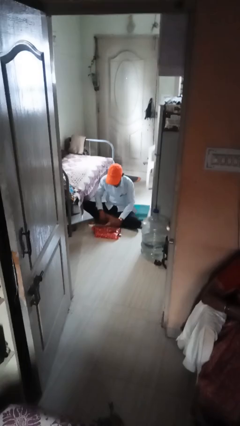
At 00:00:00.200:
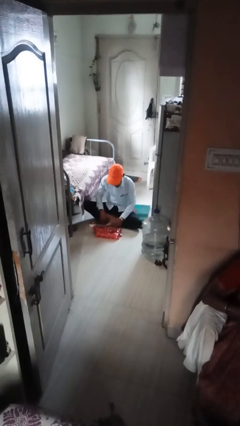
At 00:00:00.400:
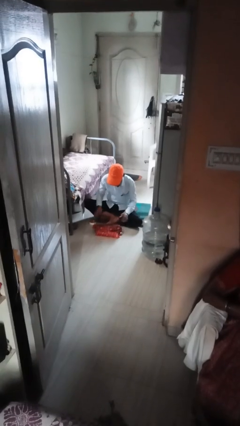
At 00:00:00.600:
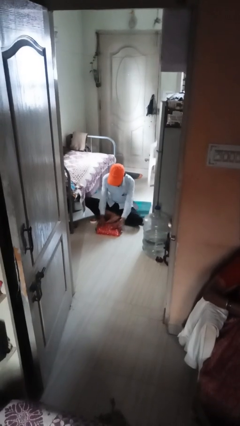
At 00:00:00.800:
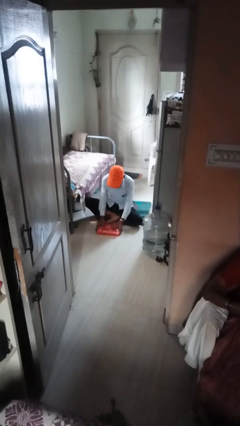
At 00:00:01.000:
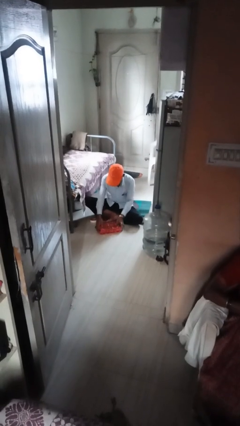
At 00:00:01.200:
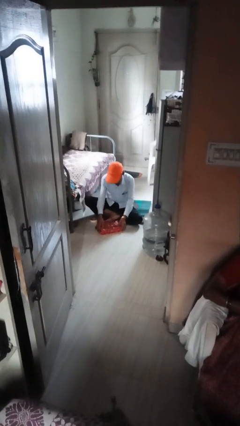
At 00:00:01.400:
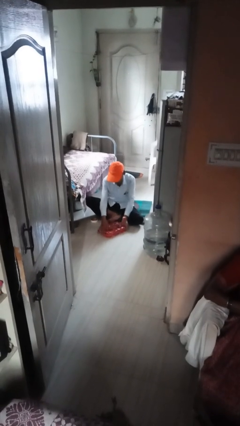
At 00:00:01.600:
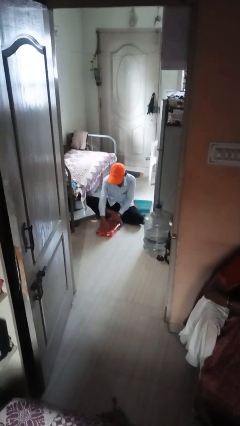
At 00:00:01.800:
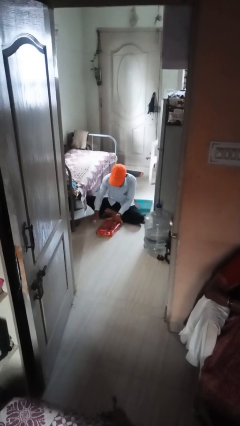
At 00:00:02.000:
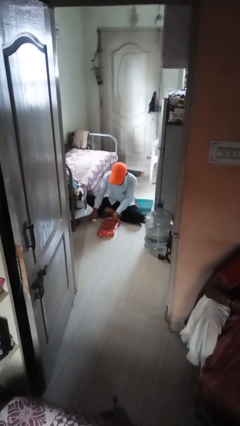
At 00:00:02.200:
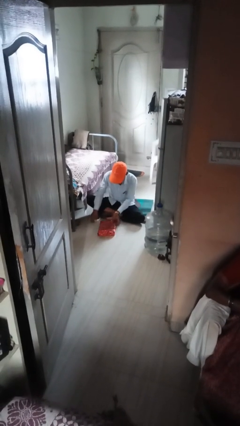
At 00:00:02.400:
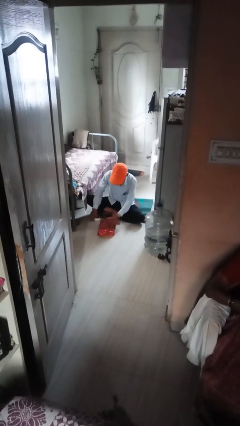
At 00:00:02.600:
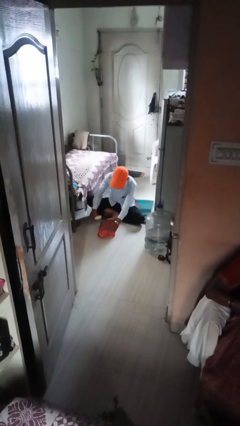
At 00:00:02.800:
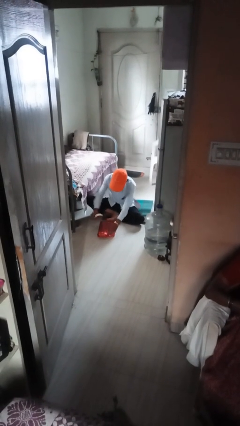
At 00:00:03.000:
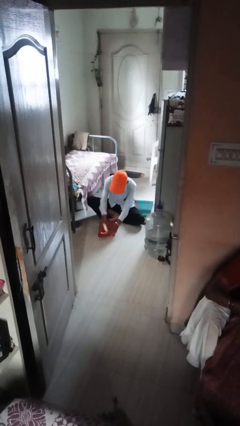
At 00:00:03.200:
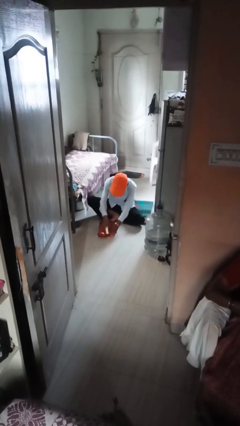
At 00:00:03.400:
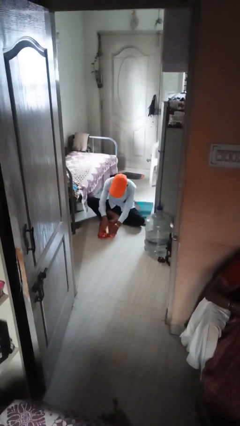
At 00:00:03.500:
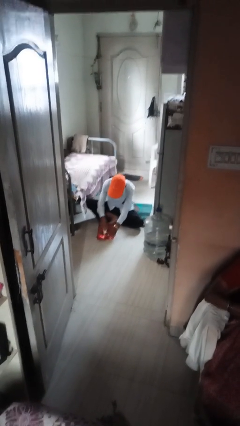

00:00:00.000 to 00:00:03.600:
person wraps box

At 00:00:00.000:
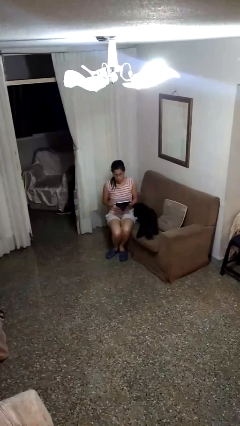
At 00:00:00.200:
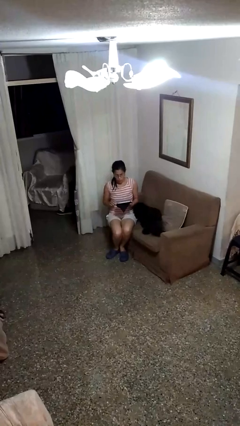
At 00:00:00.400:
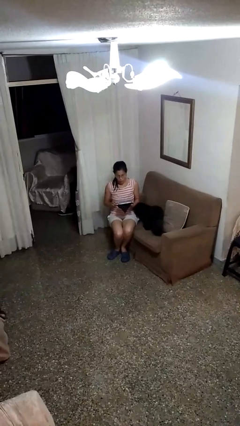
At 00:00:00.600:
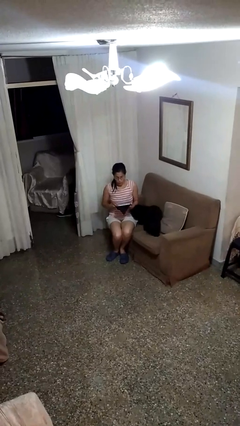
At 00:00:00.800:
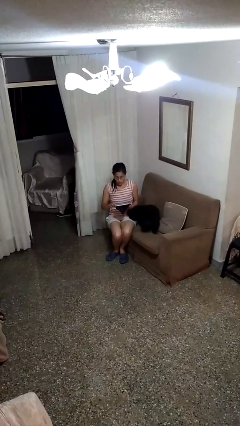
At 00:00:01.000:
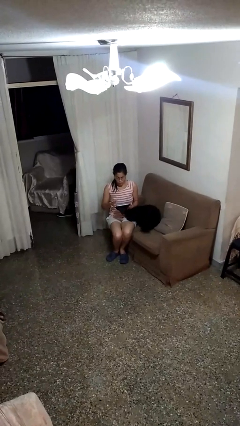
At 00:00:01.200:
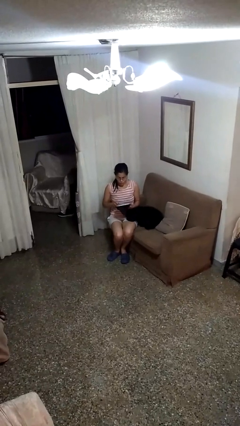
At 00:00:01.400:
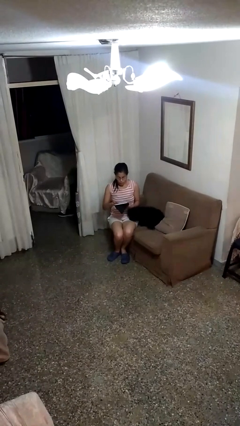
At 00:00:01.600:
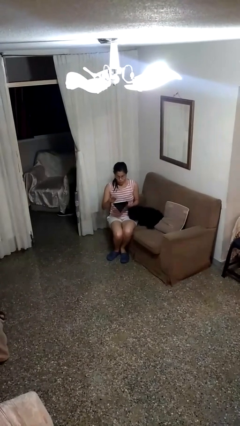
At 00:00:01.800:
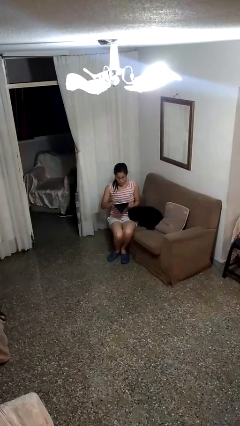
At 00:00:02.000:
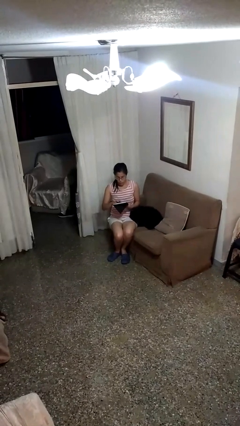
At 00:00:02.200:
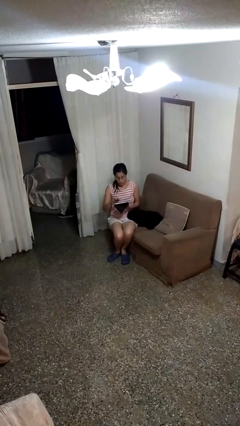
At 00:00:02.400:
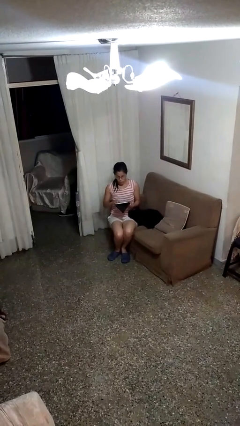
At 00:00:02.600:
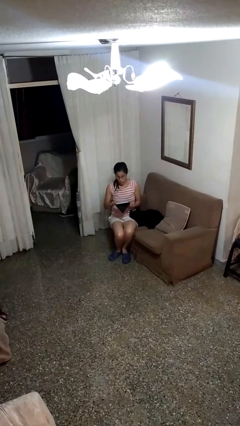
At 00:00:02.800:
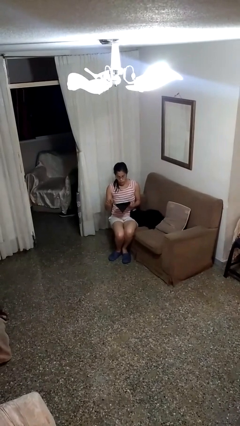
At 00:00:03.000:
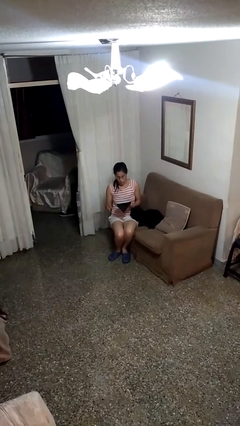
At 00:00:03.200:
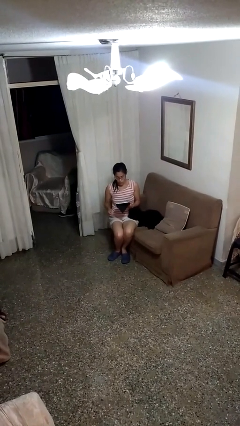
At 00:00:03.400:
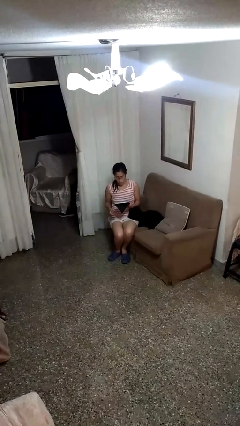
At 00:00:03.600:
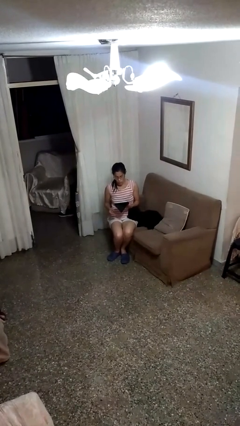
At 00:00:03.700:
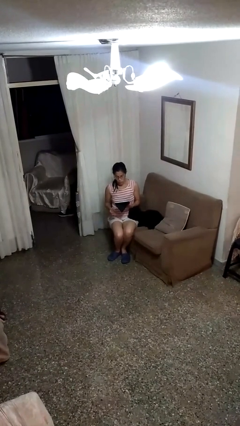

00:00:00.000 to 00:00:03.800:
person interacts with tablet

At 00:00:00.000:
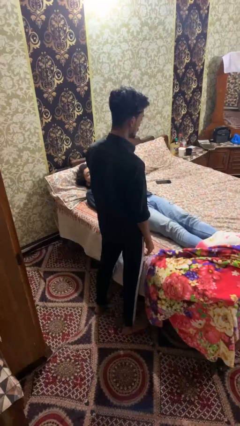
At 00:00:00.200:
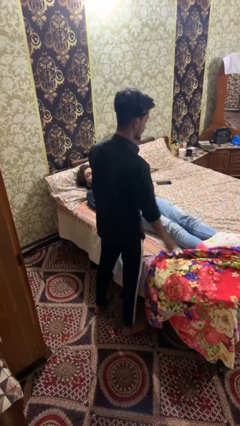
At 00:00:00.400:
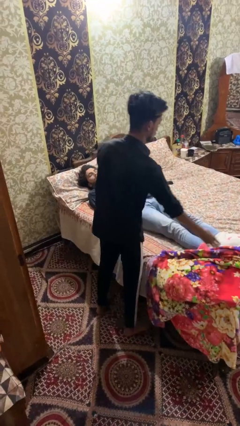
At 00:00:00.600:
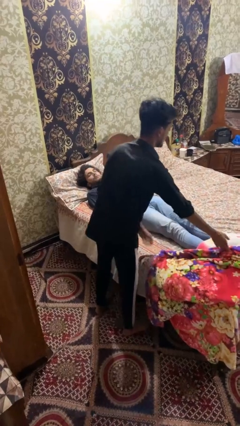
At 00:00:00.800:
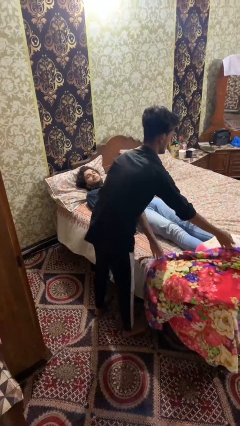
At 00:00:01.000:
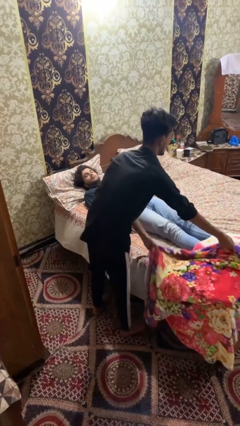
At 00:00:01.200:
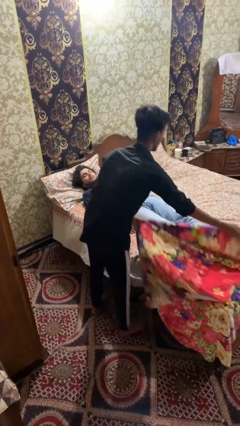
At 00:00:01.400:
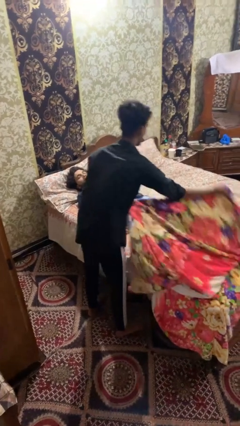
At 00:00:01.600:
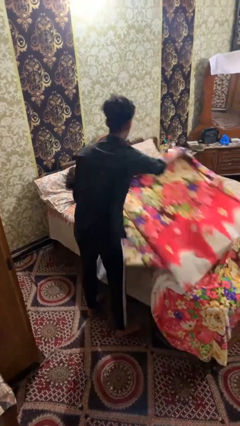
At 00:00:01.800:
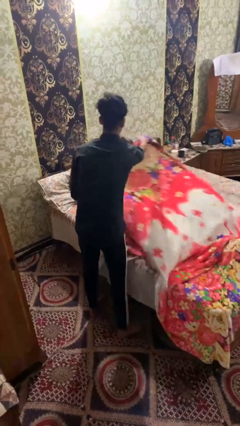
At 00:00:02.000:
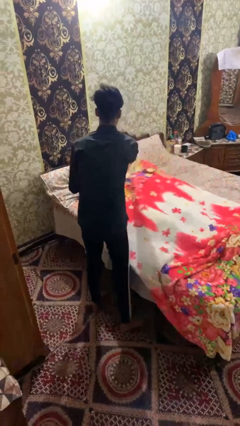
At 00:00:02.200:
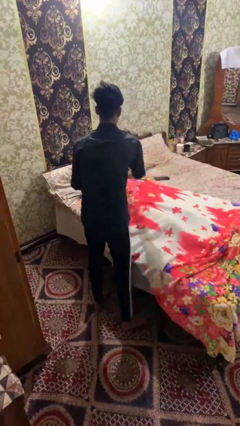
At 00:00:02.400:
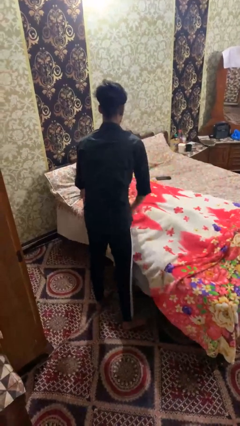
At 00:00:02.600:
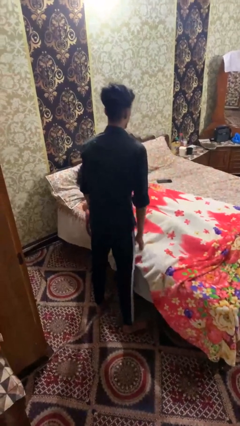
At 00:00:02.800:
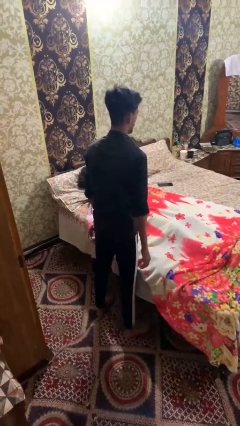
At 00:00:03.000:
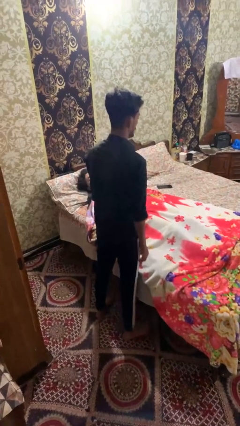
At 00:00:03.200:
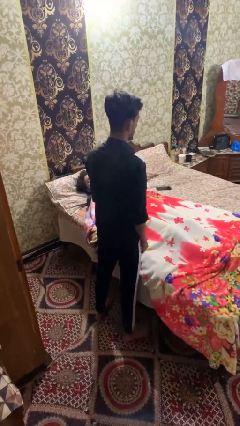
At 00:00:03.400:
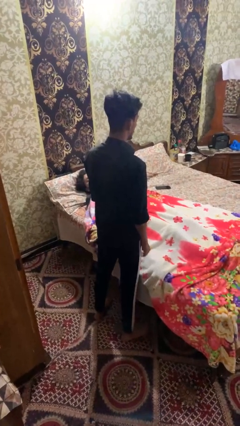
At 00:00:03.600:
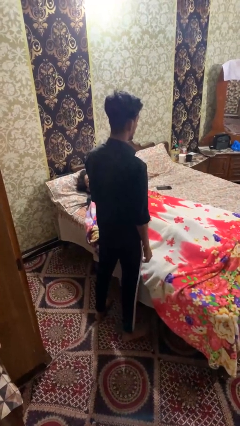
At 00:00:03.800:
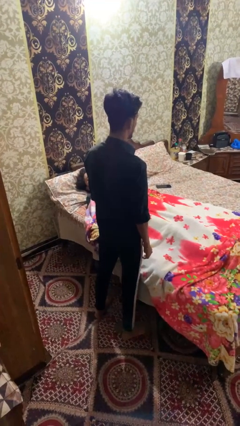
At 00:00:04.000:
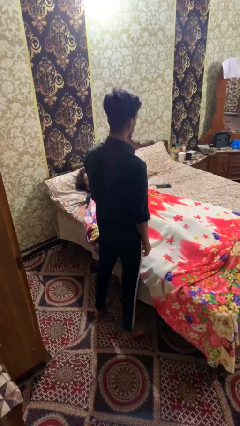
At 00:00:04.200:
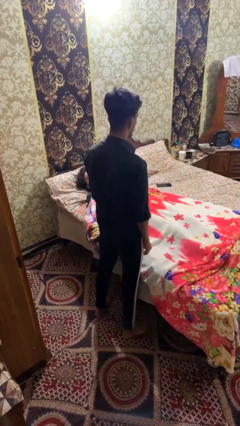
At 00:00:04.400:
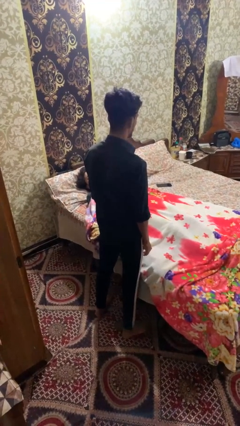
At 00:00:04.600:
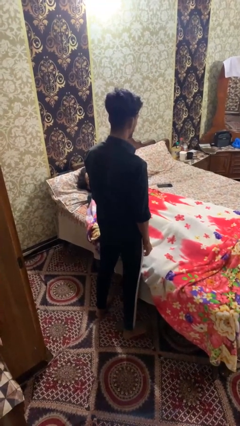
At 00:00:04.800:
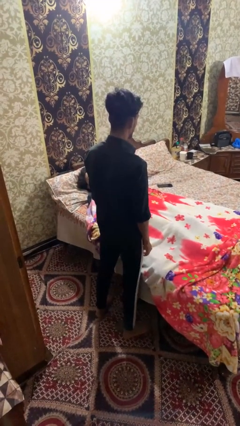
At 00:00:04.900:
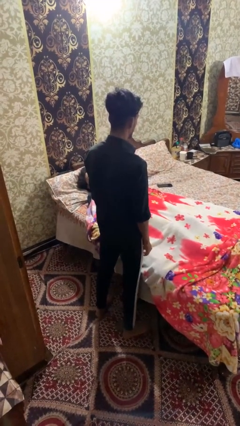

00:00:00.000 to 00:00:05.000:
person covers friend with blanket

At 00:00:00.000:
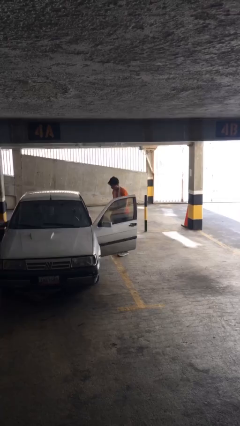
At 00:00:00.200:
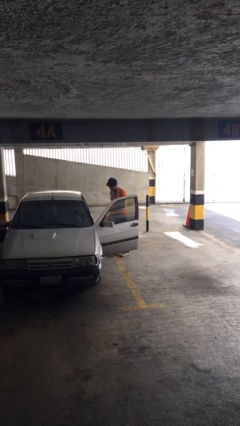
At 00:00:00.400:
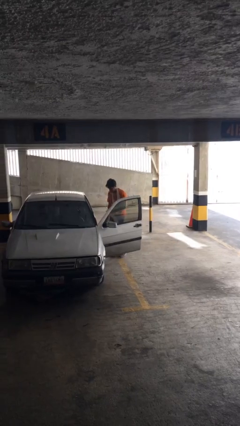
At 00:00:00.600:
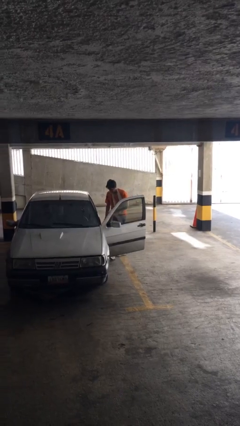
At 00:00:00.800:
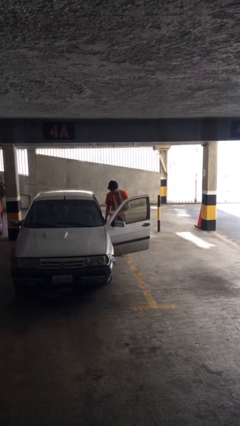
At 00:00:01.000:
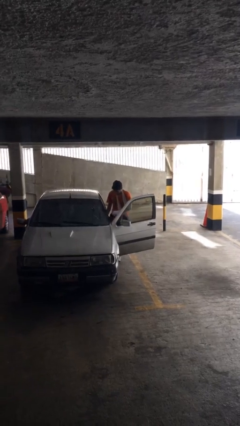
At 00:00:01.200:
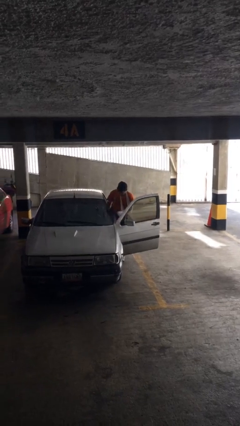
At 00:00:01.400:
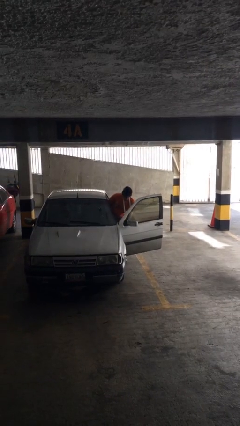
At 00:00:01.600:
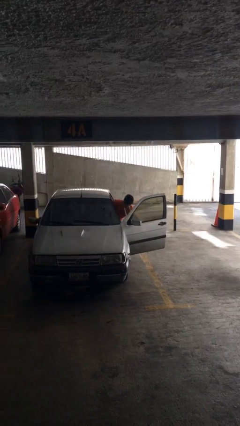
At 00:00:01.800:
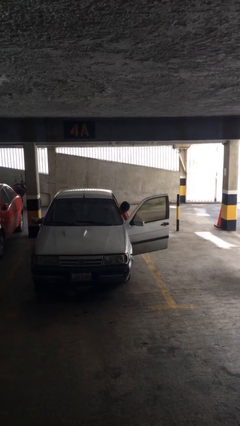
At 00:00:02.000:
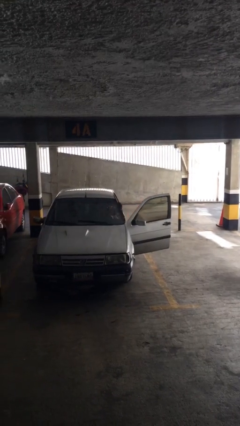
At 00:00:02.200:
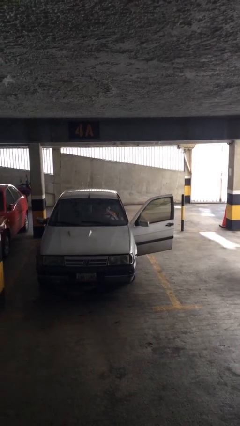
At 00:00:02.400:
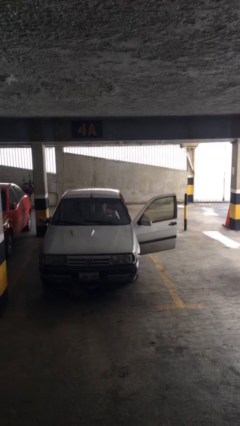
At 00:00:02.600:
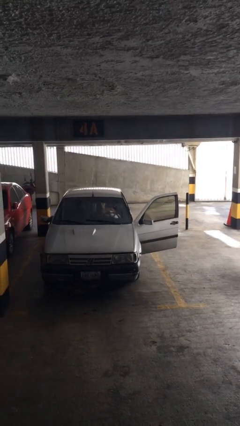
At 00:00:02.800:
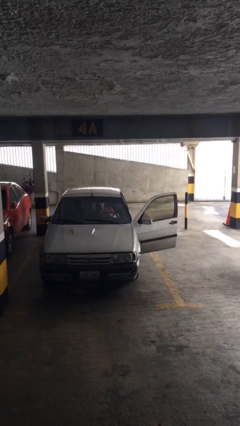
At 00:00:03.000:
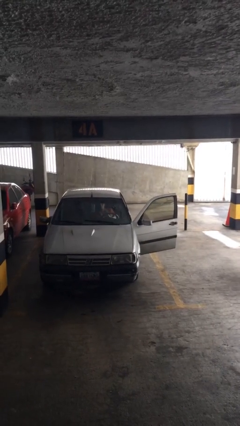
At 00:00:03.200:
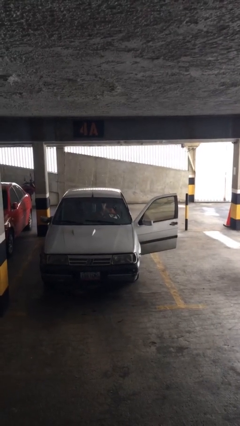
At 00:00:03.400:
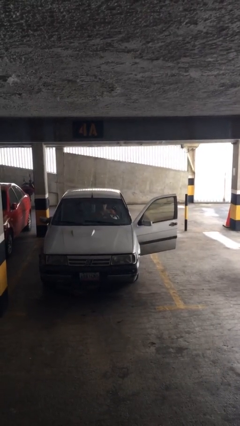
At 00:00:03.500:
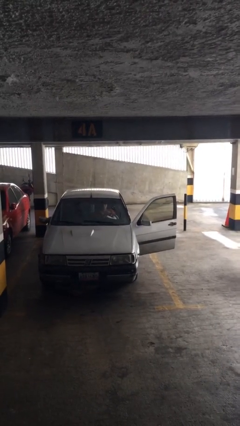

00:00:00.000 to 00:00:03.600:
person enters car

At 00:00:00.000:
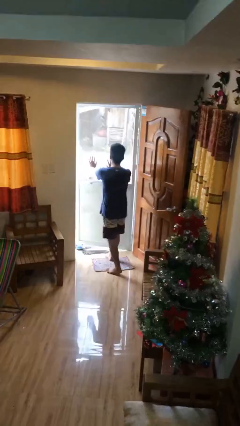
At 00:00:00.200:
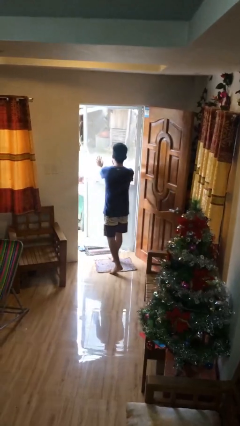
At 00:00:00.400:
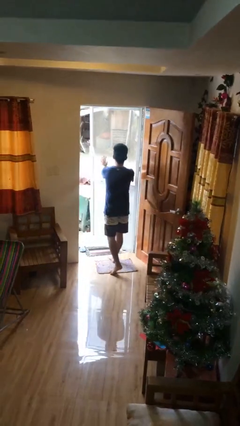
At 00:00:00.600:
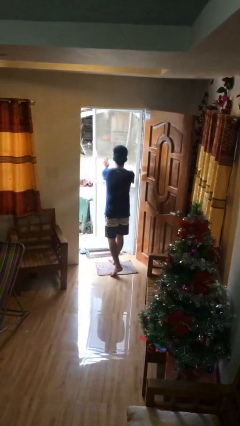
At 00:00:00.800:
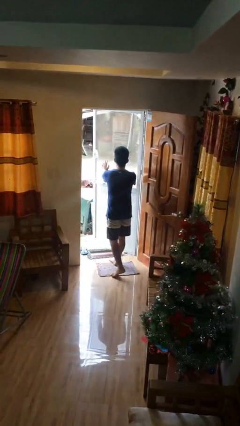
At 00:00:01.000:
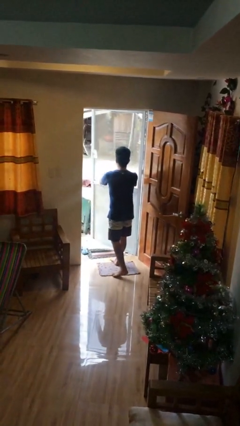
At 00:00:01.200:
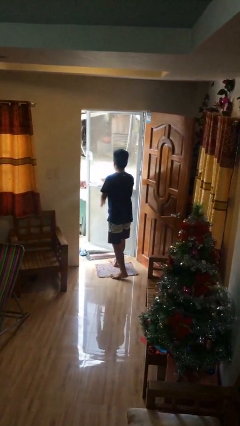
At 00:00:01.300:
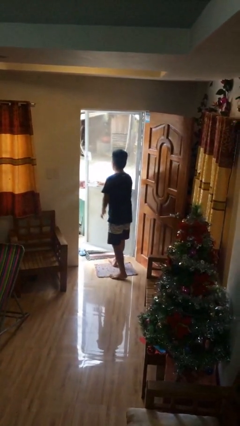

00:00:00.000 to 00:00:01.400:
person opens facility door
